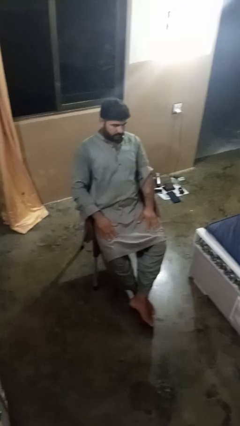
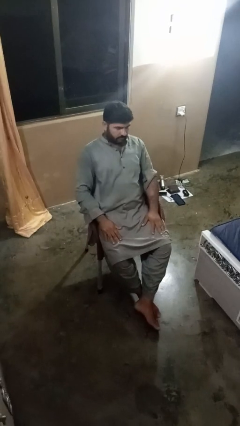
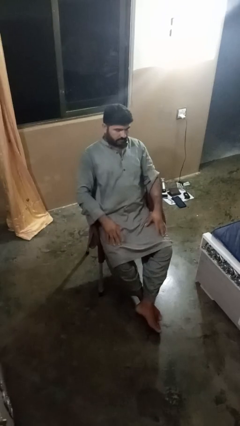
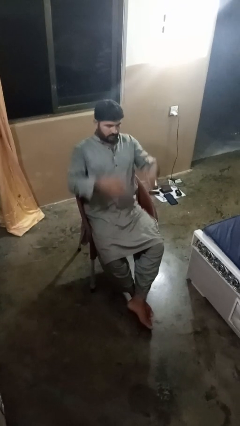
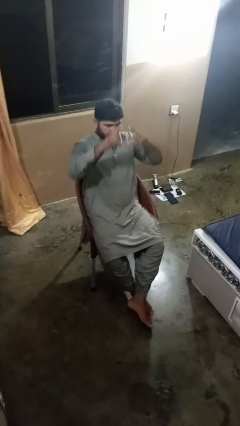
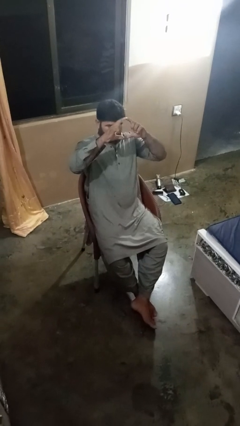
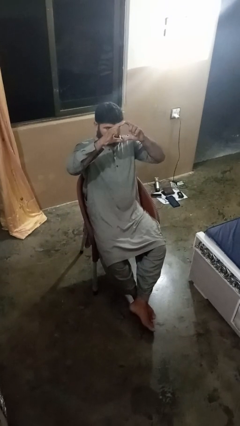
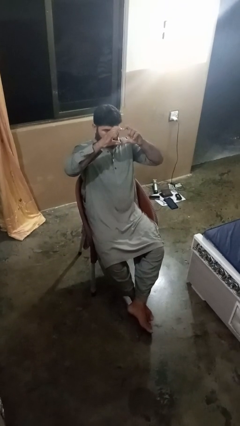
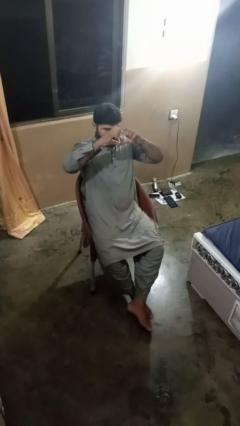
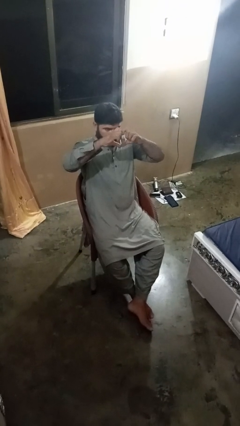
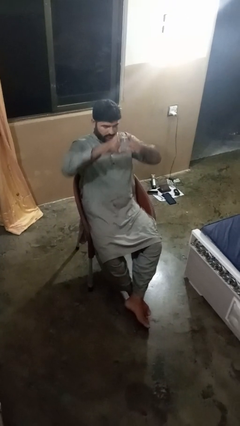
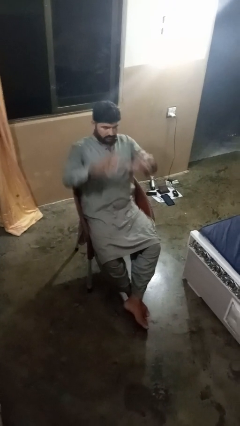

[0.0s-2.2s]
person gestures heart

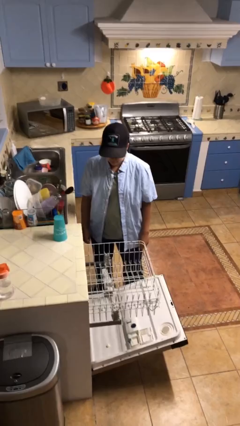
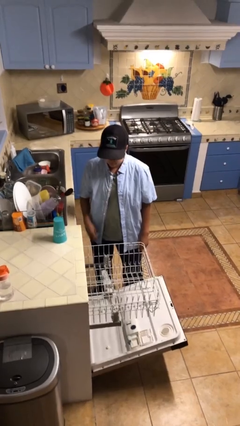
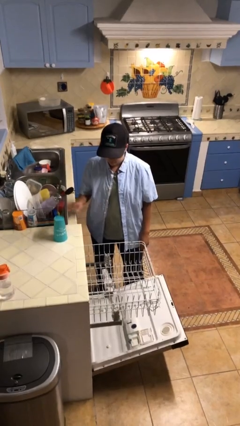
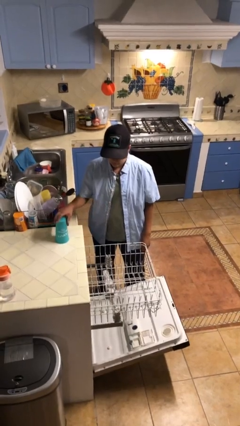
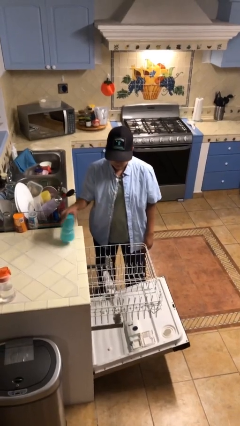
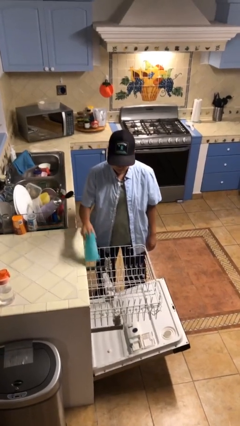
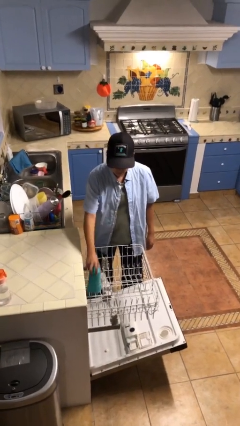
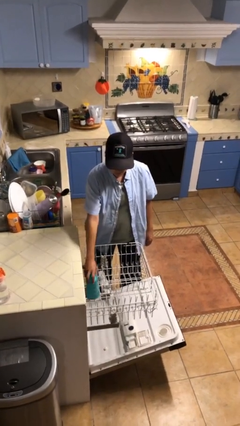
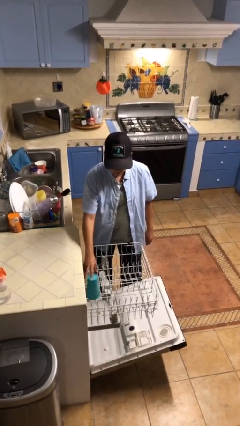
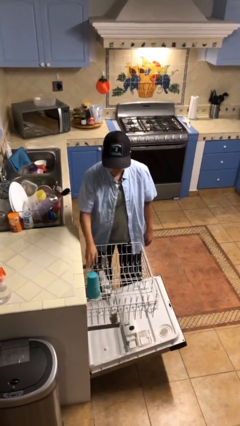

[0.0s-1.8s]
person loads dishwasher

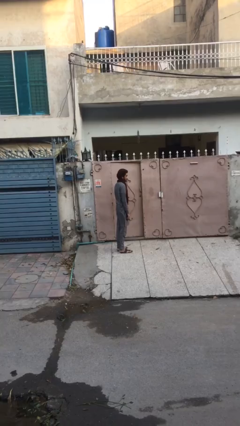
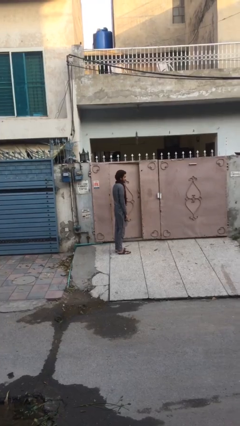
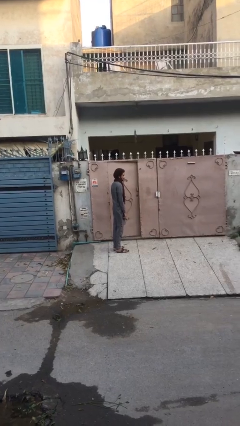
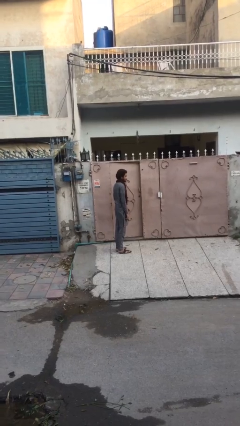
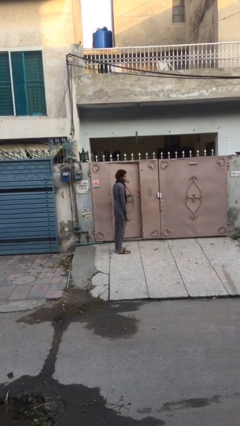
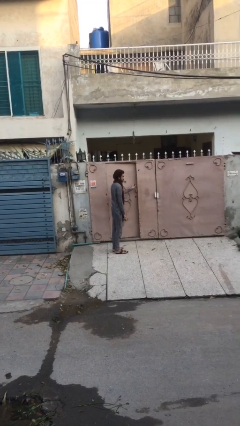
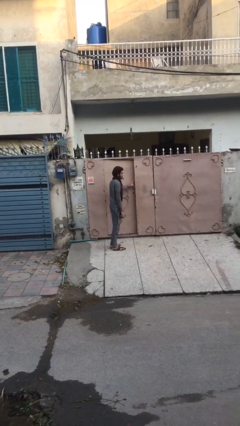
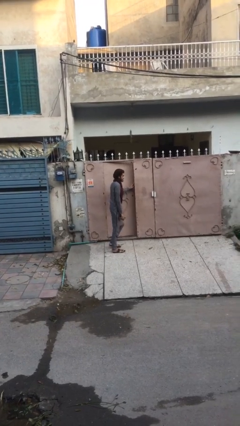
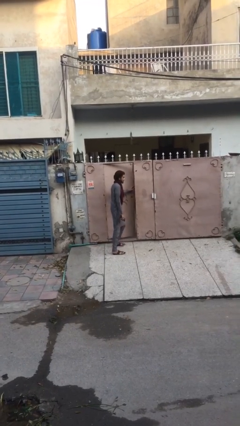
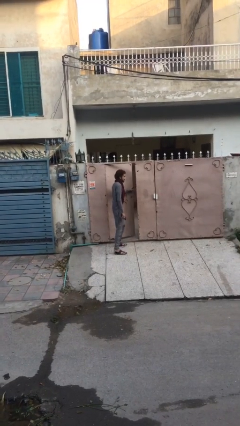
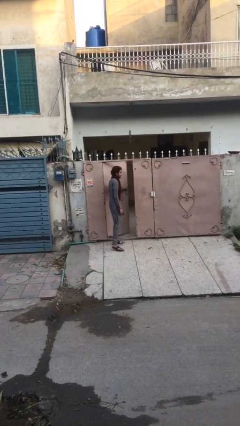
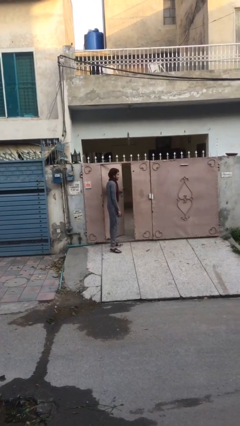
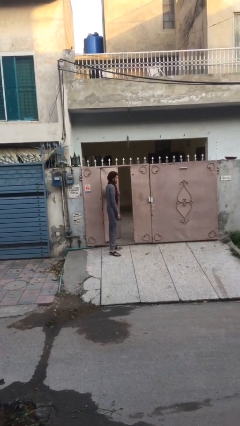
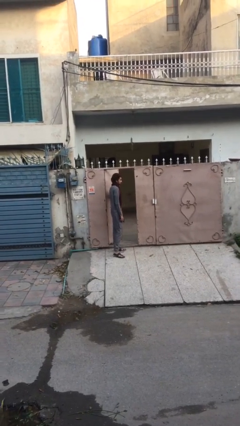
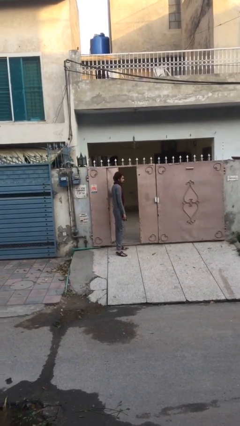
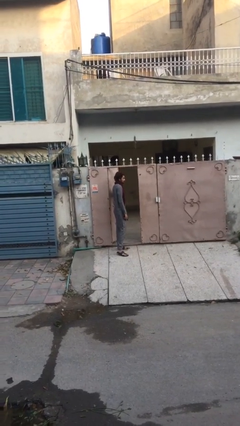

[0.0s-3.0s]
person opens facility door

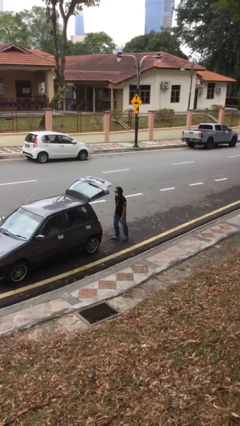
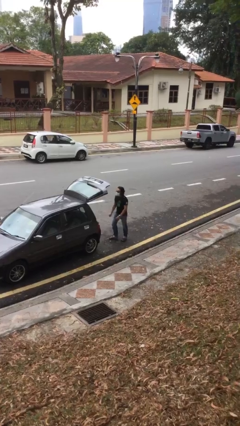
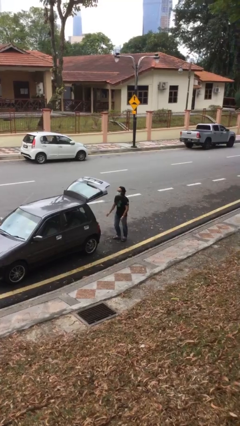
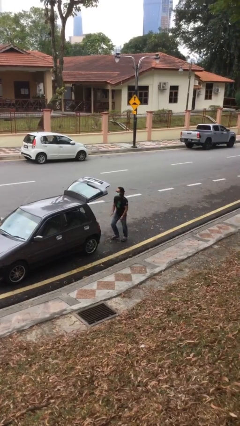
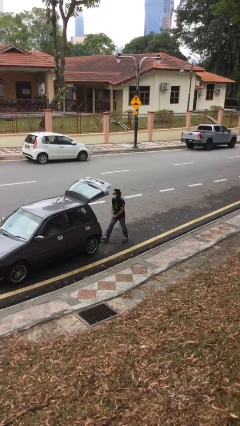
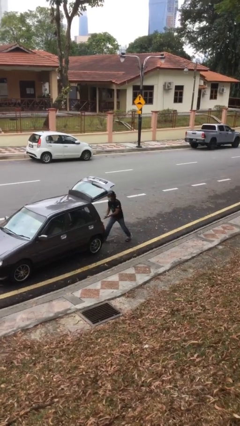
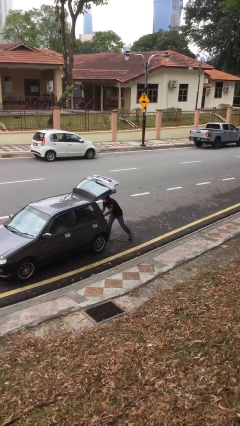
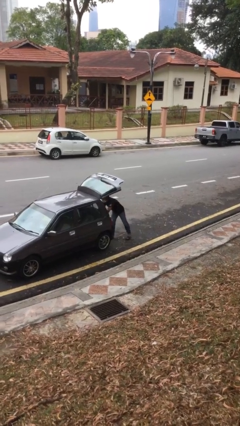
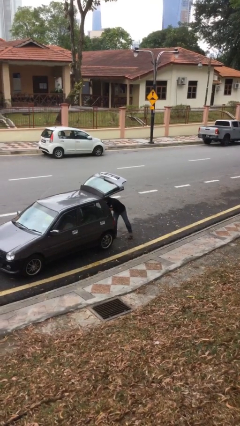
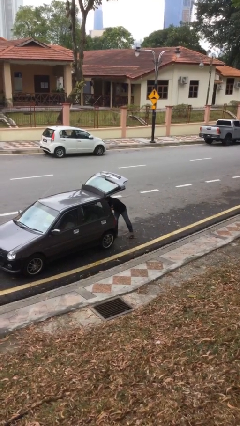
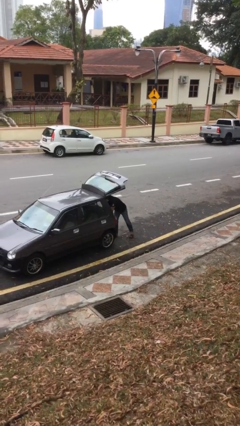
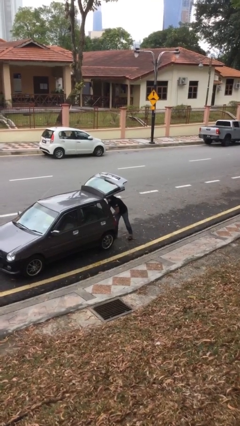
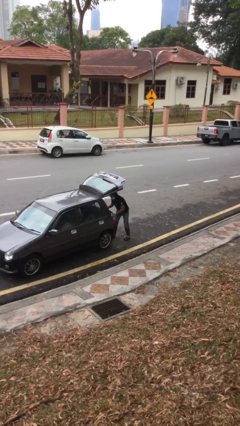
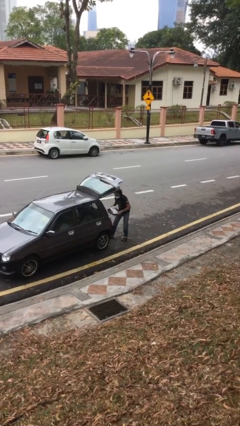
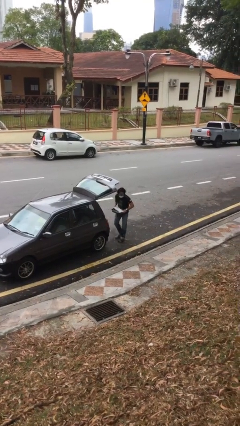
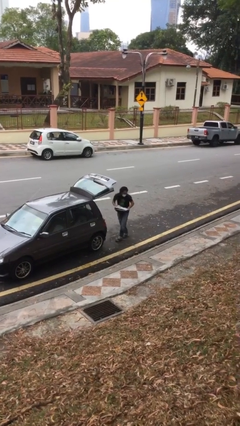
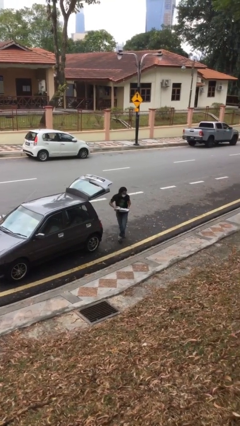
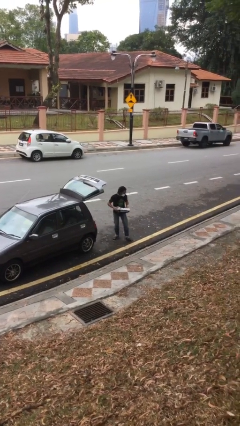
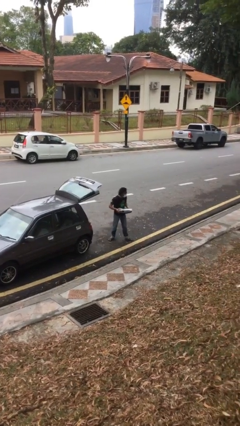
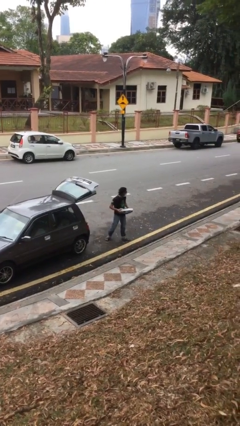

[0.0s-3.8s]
person unloads car

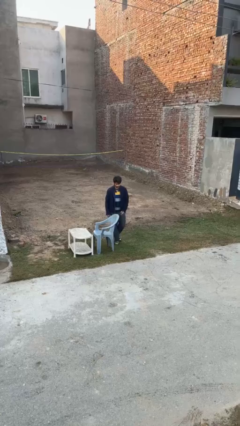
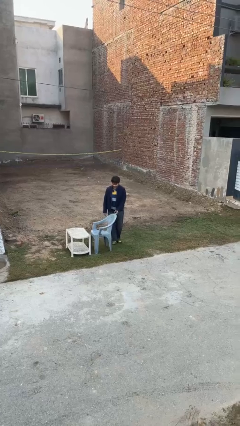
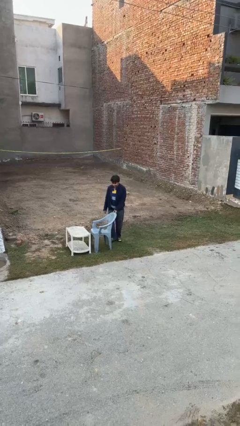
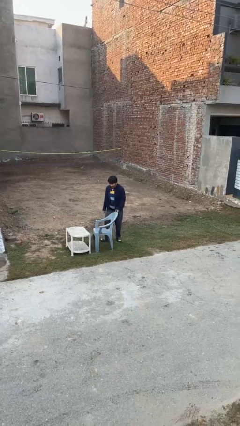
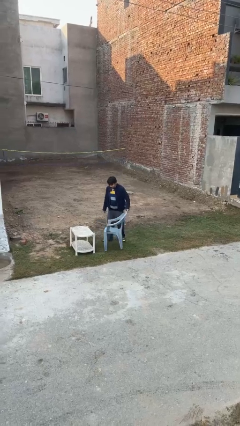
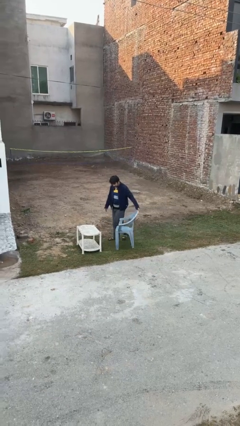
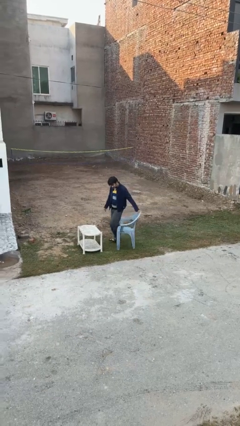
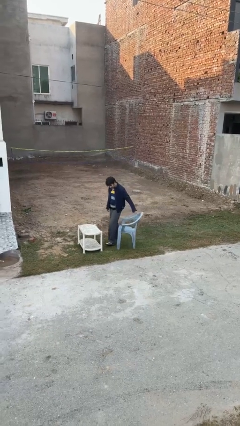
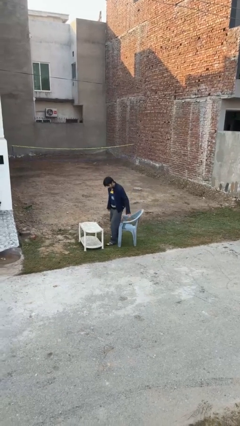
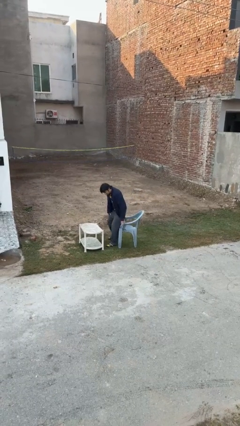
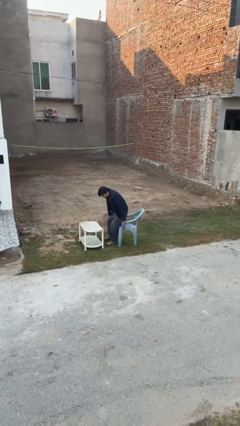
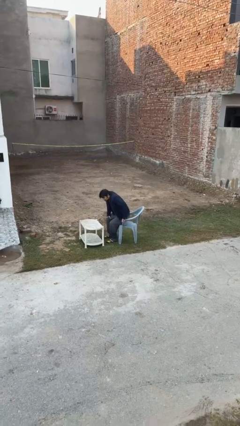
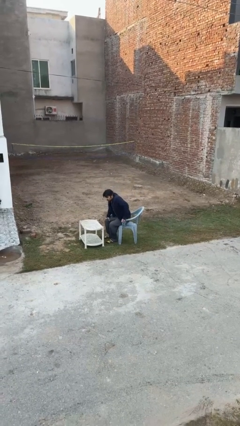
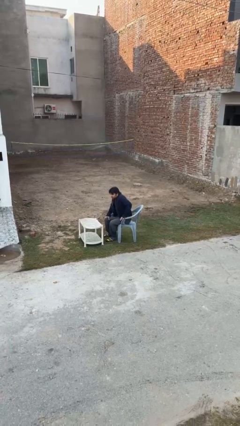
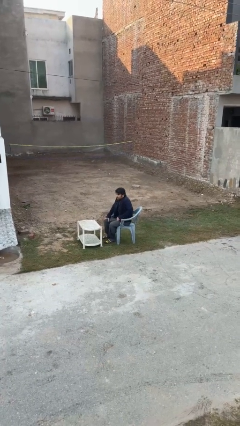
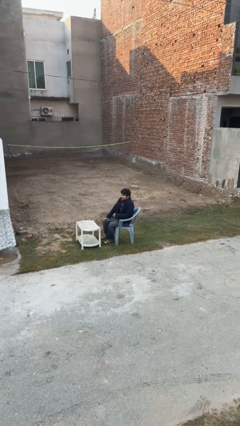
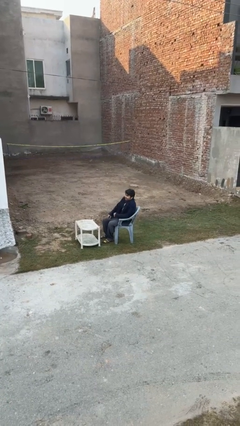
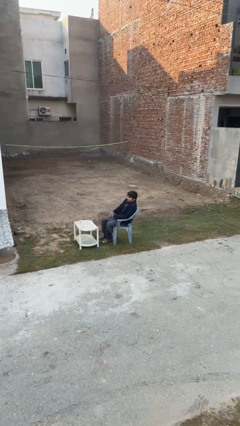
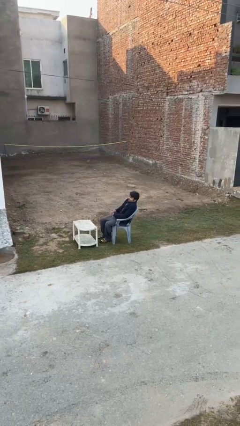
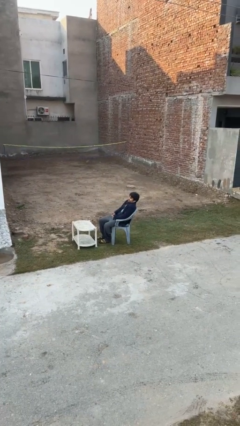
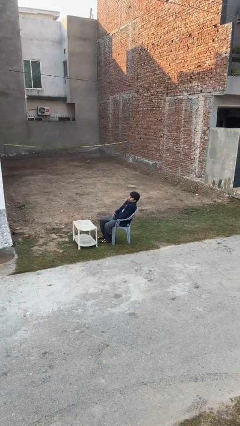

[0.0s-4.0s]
person sits down

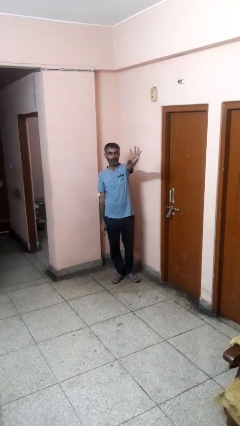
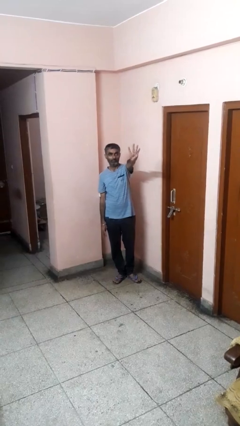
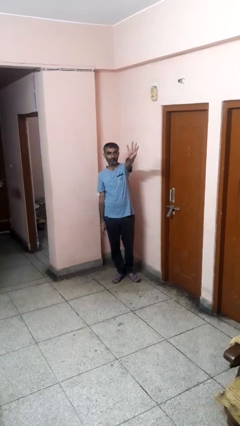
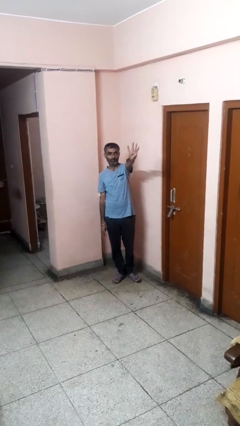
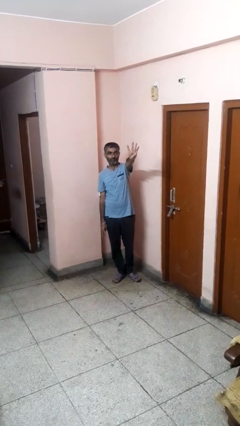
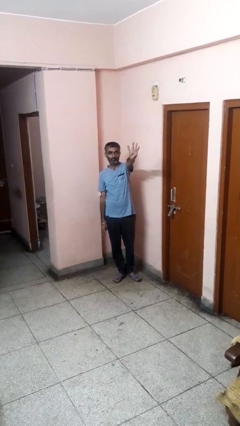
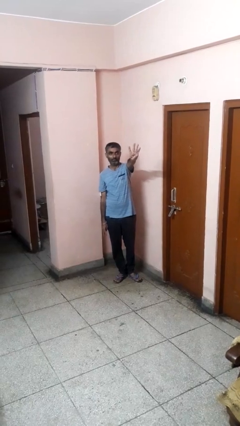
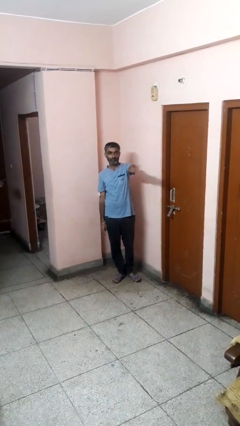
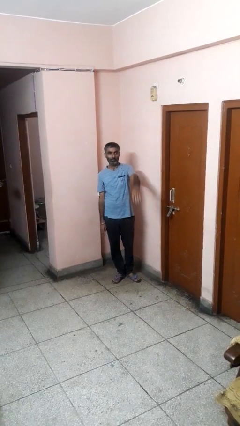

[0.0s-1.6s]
person gestures number four

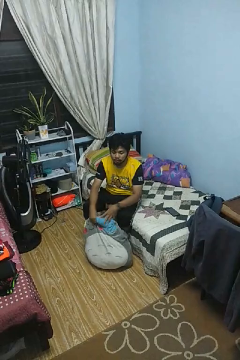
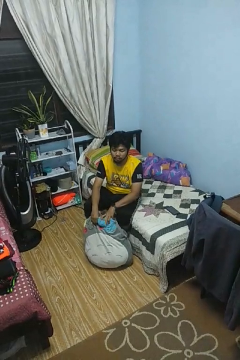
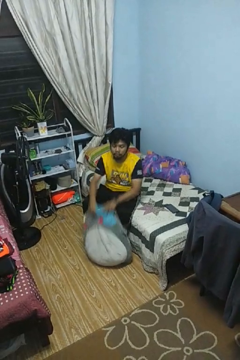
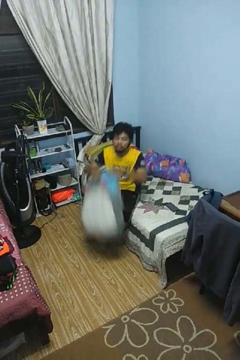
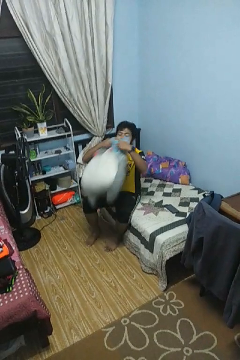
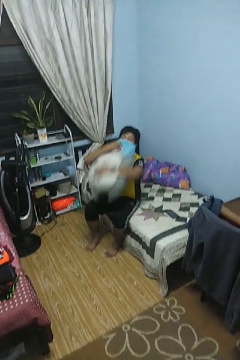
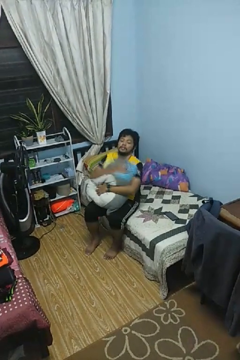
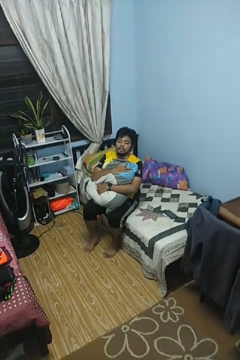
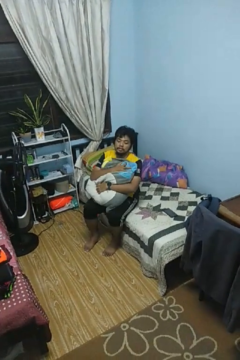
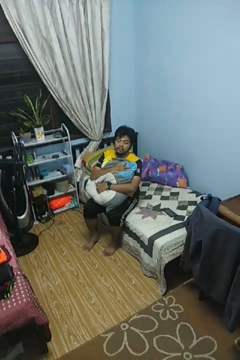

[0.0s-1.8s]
person hugs stuffed animal
